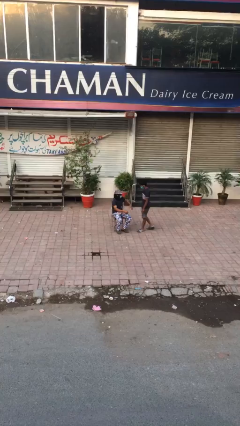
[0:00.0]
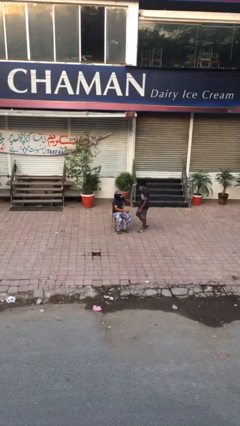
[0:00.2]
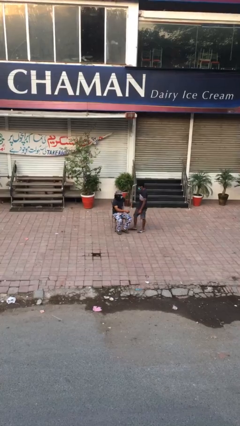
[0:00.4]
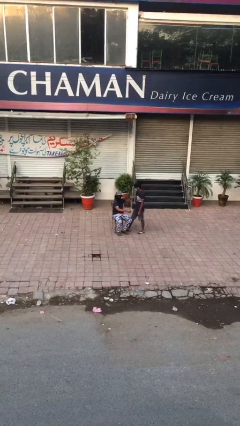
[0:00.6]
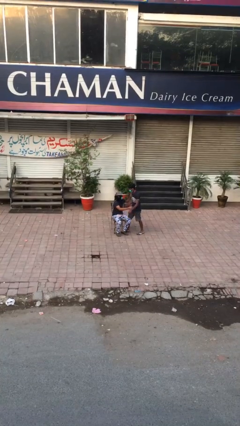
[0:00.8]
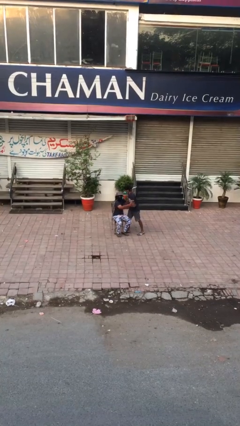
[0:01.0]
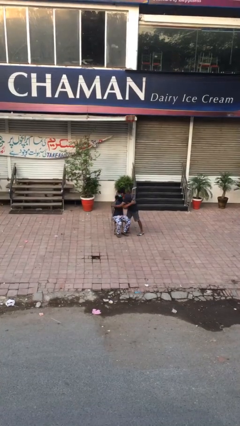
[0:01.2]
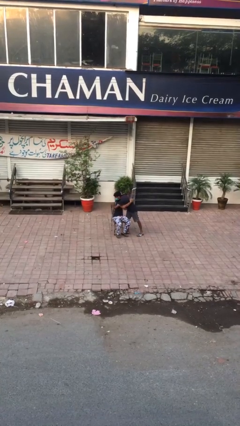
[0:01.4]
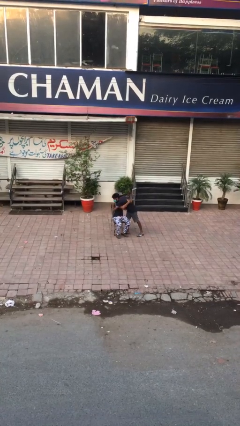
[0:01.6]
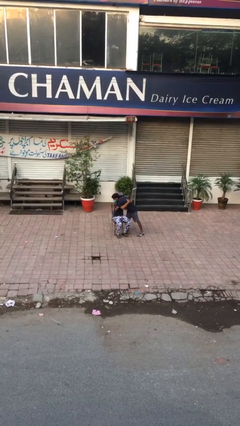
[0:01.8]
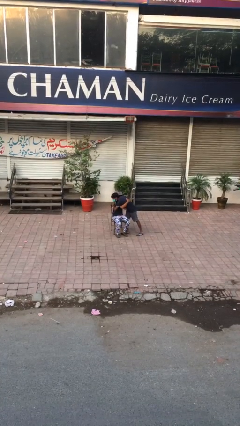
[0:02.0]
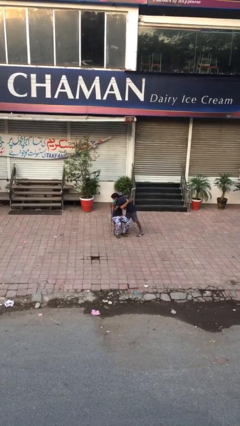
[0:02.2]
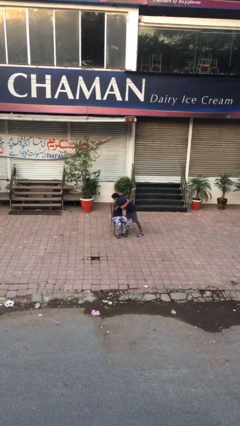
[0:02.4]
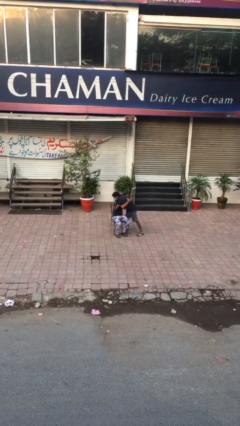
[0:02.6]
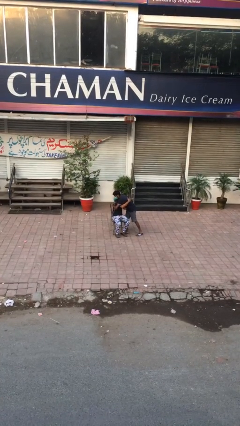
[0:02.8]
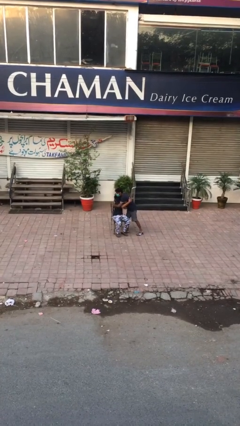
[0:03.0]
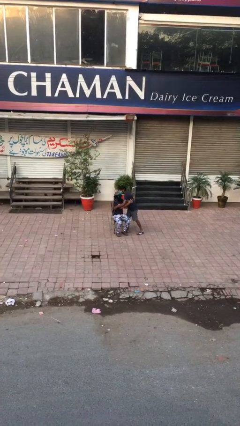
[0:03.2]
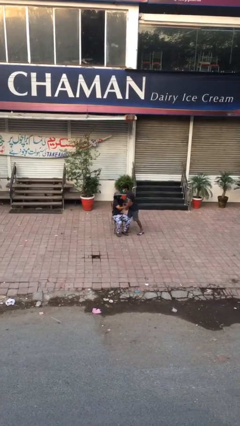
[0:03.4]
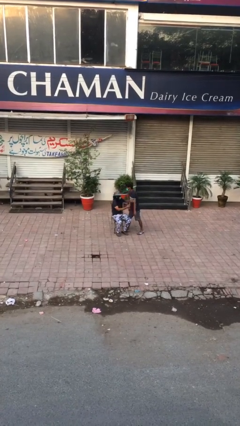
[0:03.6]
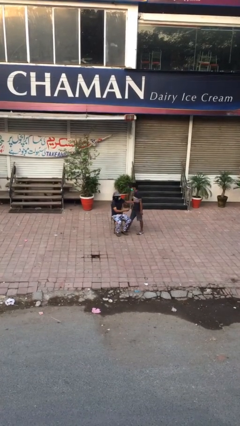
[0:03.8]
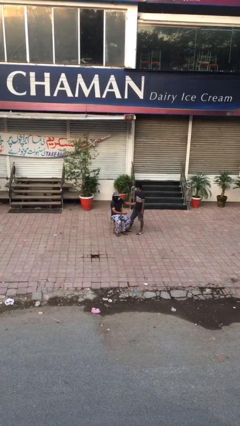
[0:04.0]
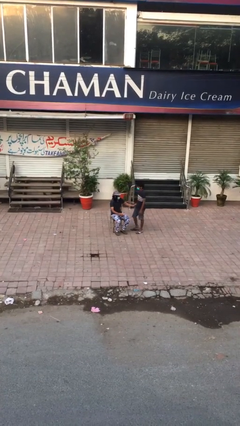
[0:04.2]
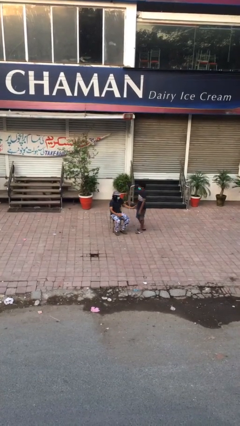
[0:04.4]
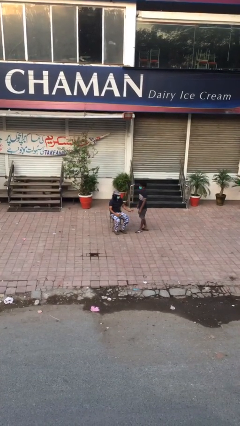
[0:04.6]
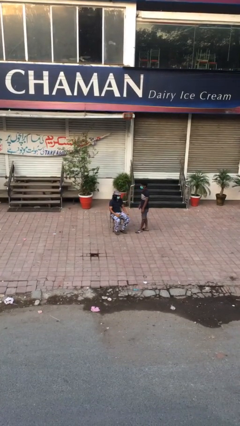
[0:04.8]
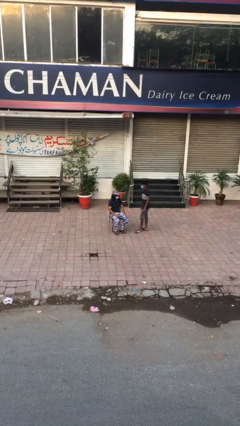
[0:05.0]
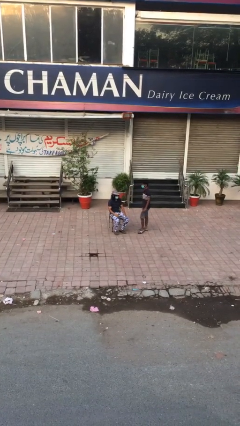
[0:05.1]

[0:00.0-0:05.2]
person embraces person

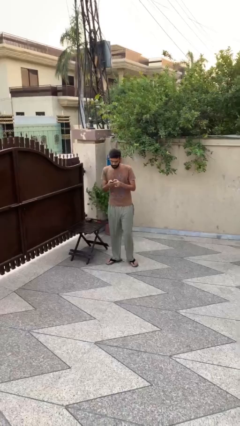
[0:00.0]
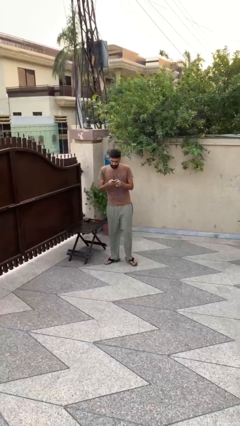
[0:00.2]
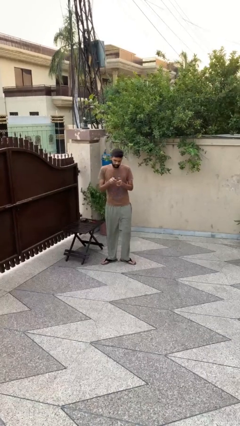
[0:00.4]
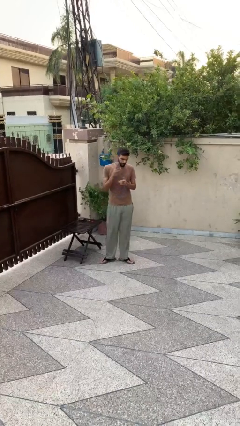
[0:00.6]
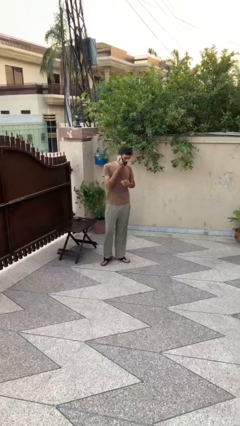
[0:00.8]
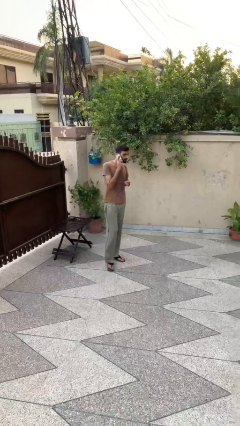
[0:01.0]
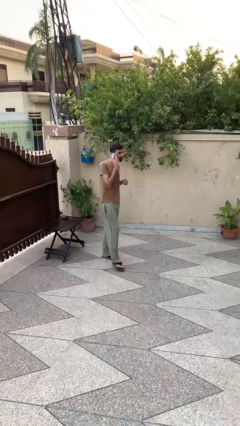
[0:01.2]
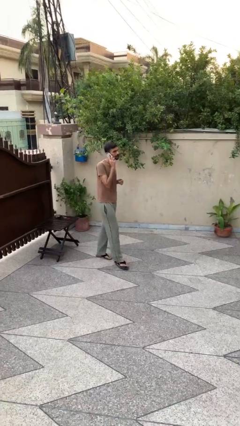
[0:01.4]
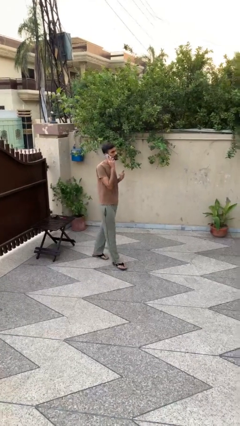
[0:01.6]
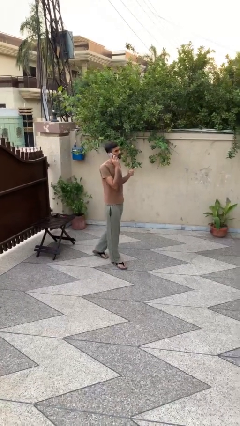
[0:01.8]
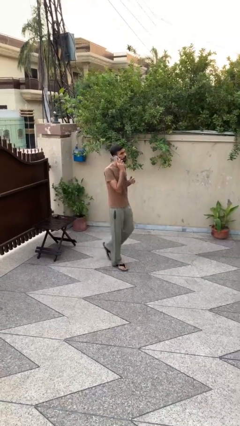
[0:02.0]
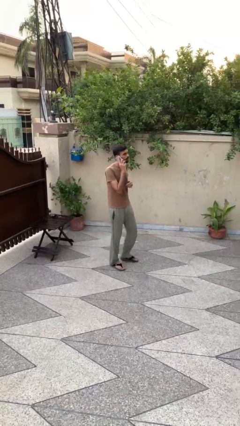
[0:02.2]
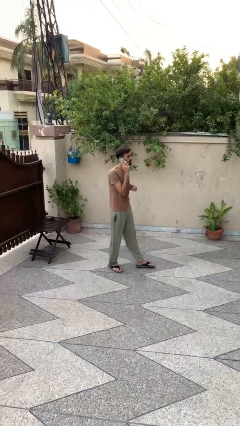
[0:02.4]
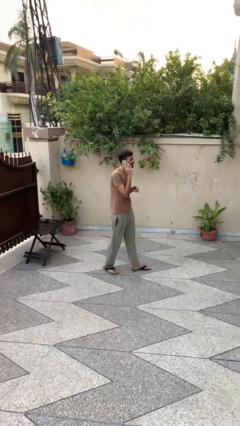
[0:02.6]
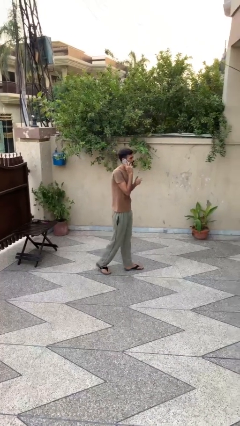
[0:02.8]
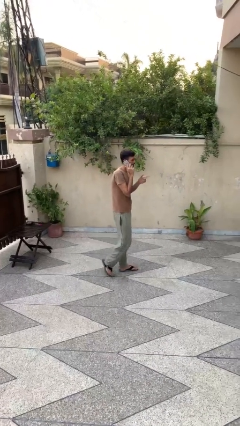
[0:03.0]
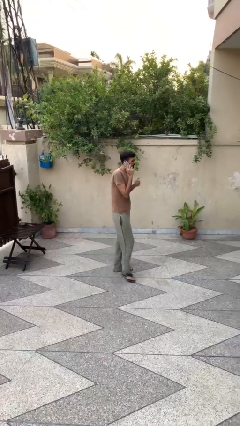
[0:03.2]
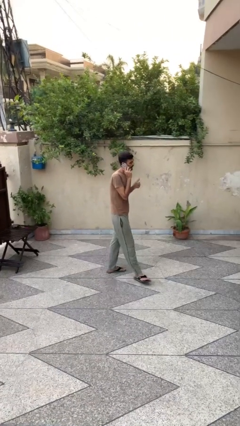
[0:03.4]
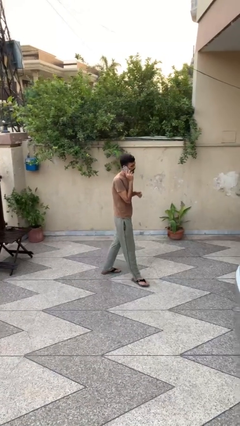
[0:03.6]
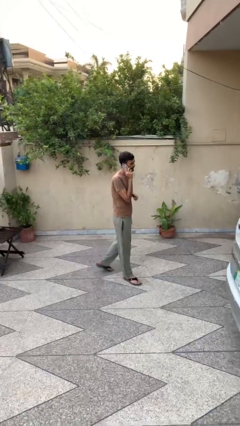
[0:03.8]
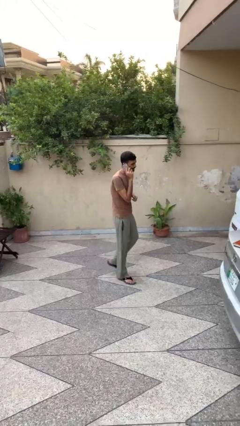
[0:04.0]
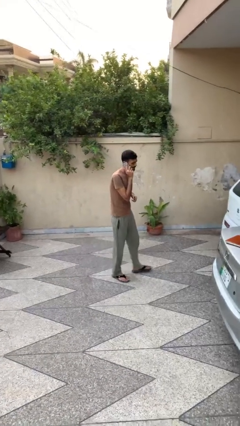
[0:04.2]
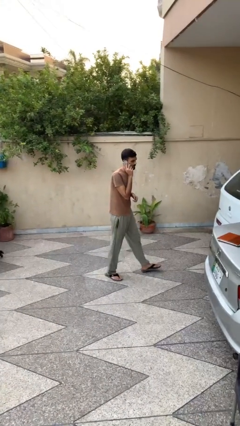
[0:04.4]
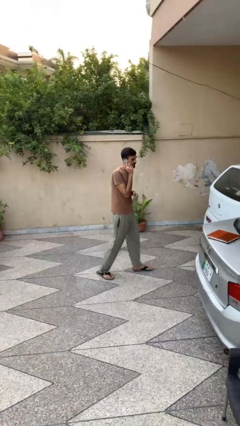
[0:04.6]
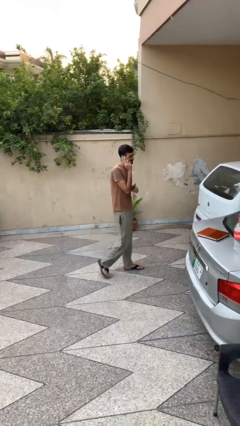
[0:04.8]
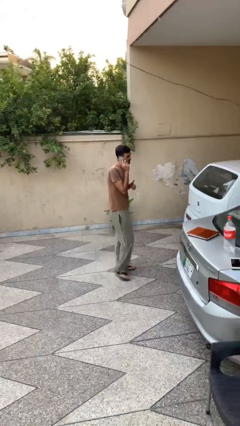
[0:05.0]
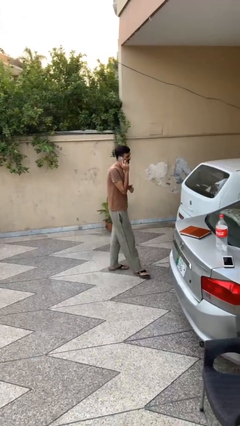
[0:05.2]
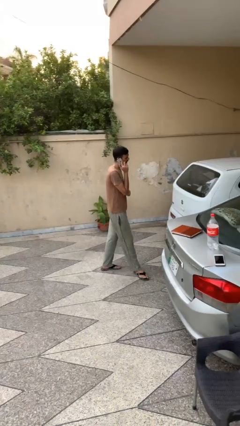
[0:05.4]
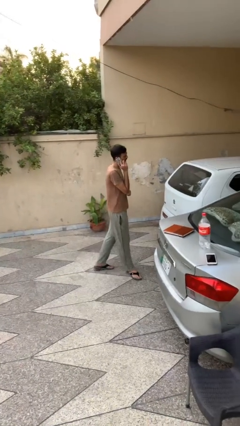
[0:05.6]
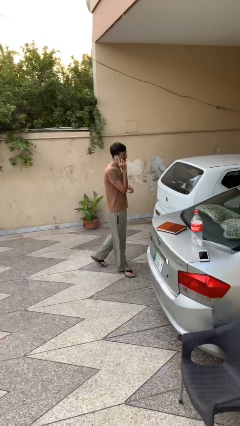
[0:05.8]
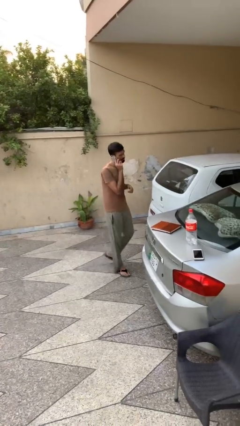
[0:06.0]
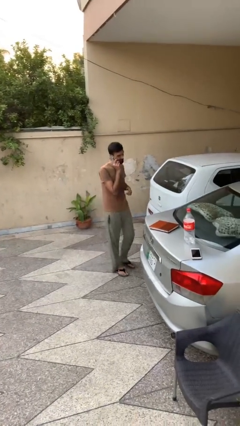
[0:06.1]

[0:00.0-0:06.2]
person talks on phone

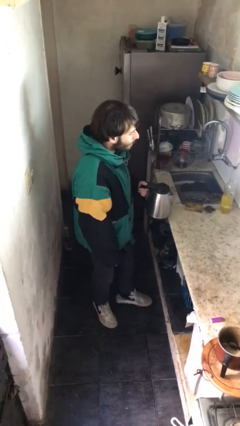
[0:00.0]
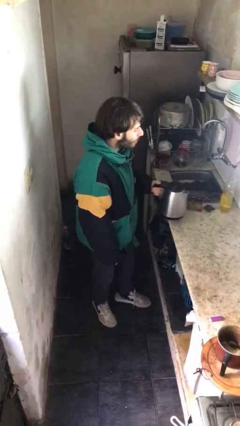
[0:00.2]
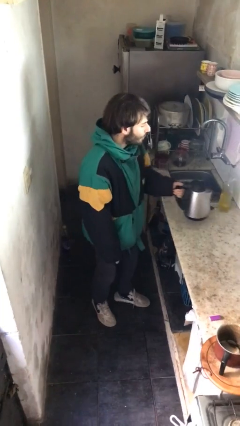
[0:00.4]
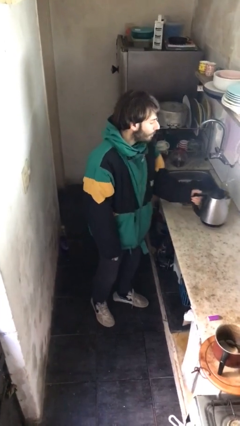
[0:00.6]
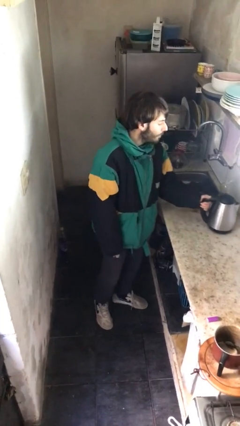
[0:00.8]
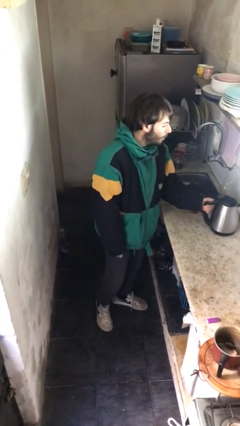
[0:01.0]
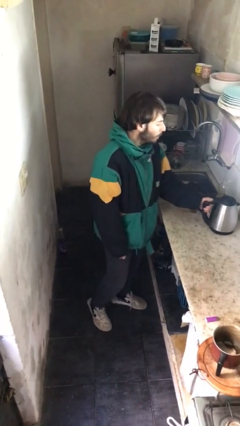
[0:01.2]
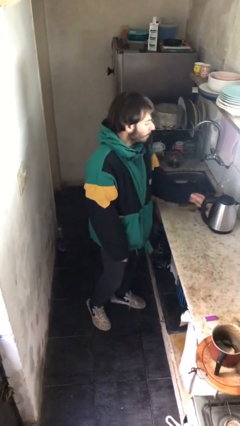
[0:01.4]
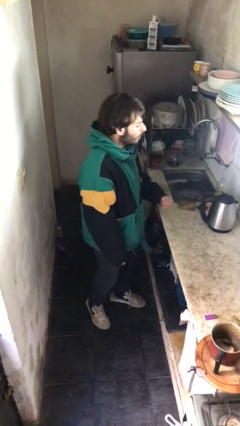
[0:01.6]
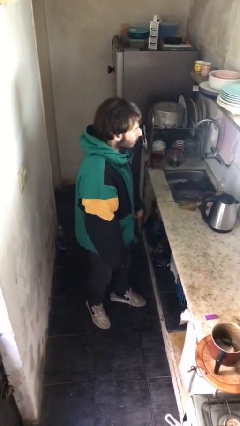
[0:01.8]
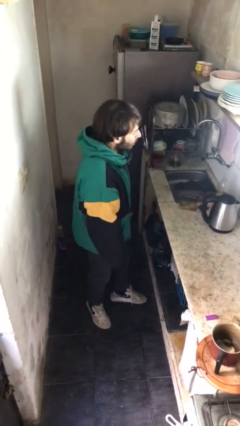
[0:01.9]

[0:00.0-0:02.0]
person puts down object on countertop

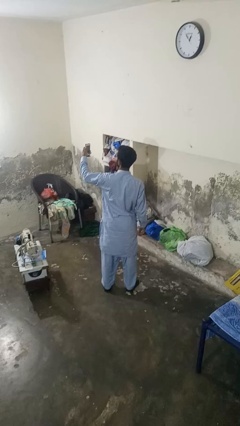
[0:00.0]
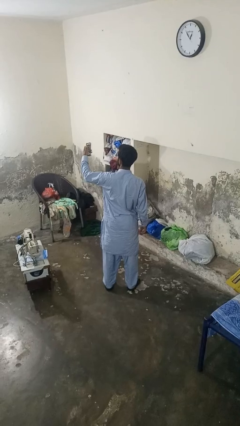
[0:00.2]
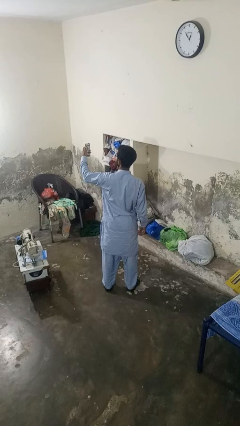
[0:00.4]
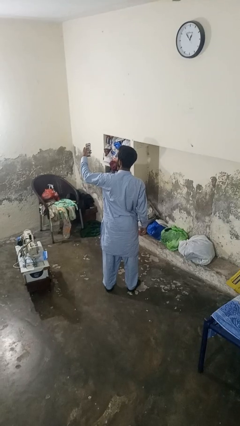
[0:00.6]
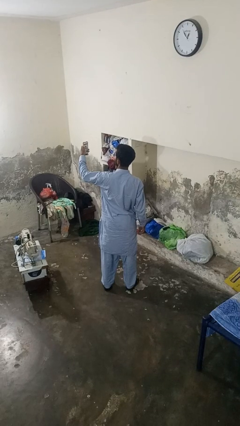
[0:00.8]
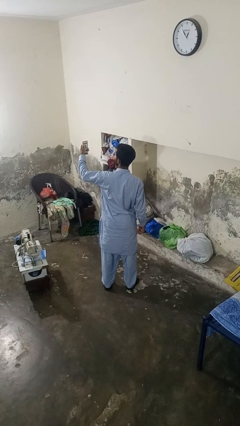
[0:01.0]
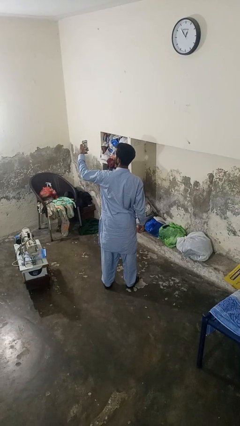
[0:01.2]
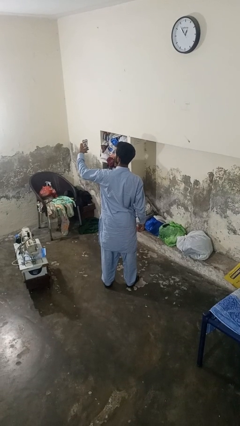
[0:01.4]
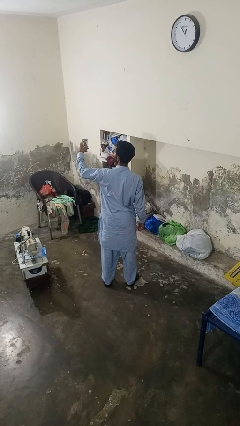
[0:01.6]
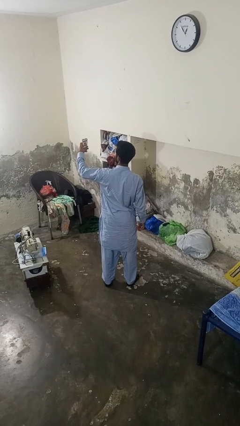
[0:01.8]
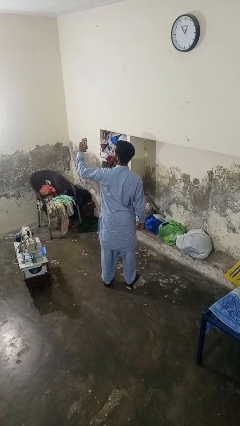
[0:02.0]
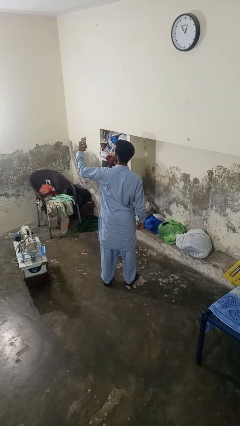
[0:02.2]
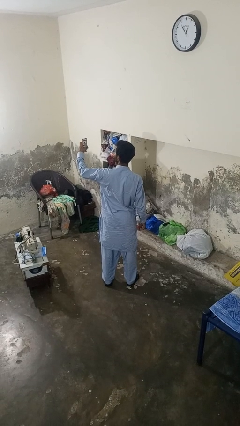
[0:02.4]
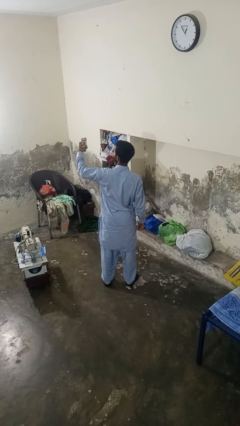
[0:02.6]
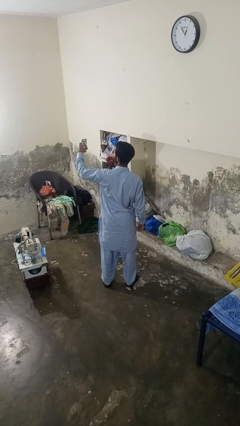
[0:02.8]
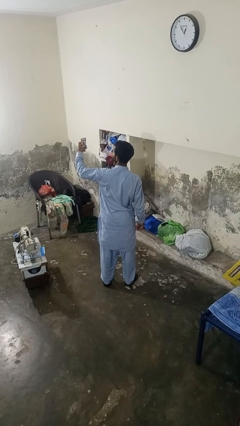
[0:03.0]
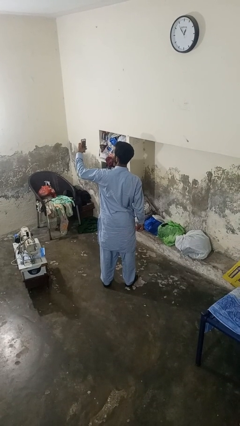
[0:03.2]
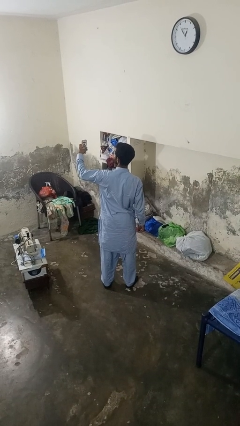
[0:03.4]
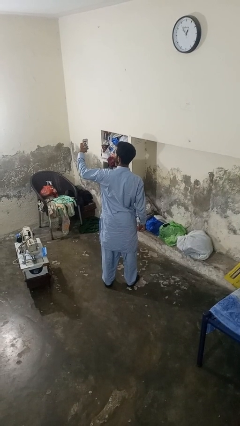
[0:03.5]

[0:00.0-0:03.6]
person takes selfie

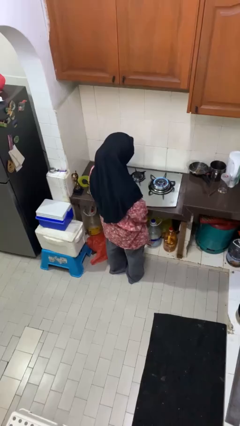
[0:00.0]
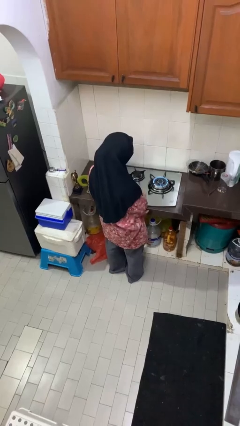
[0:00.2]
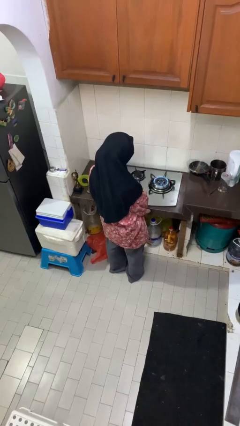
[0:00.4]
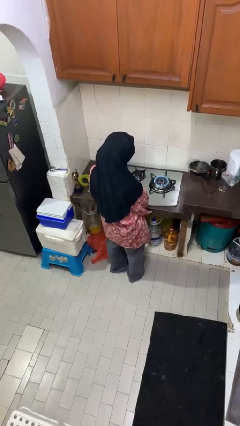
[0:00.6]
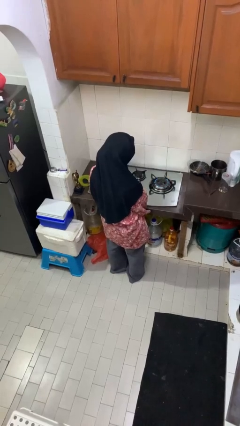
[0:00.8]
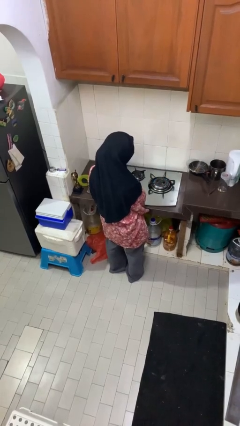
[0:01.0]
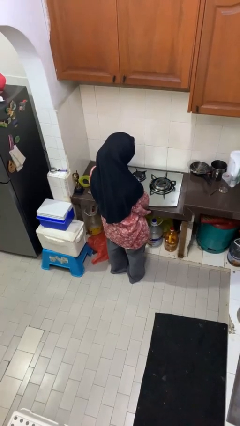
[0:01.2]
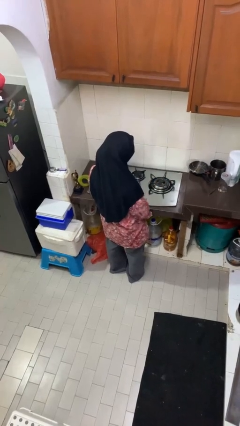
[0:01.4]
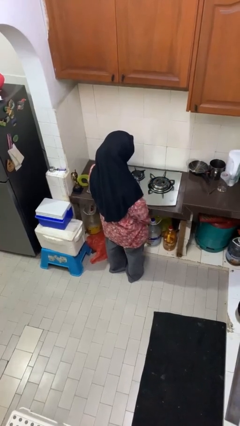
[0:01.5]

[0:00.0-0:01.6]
person turns off stovetop
